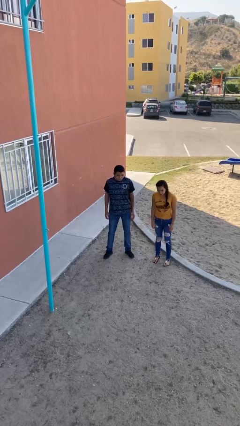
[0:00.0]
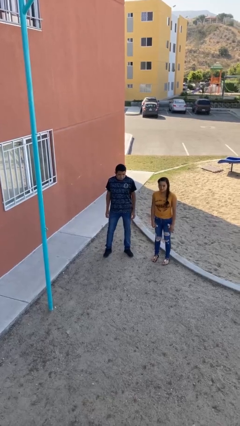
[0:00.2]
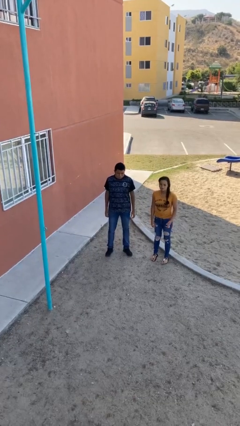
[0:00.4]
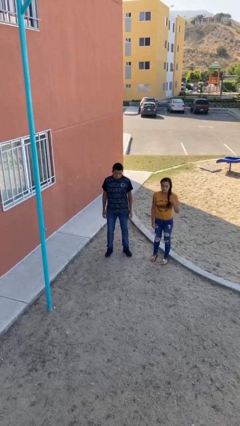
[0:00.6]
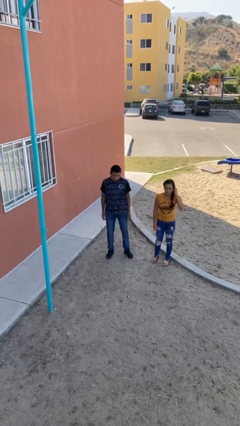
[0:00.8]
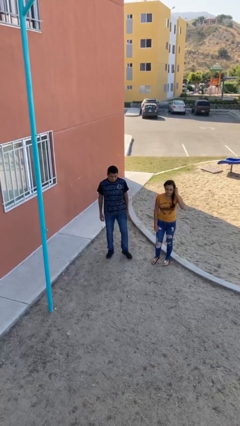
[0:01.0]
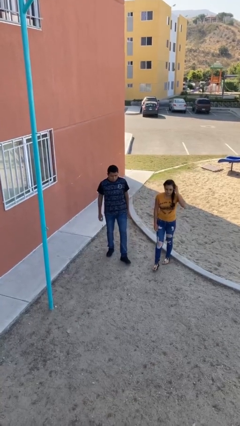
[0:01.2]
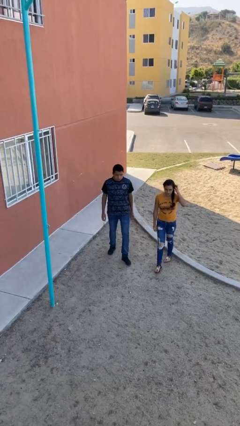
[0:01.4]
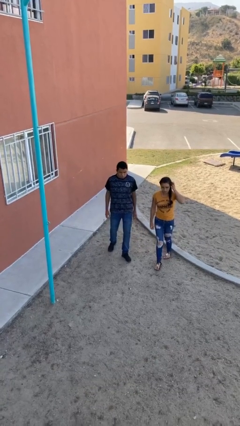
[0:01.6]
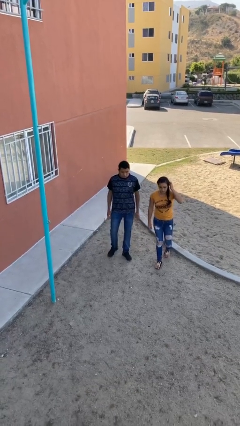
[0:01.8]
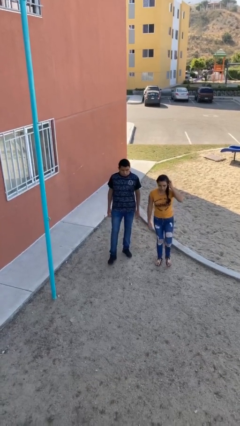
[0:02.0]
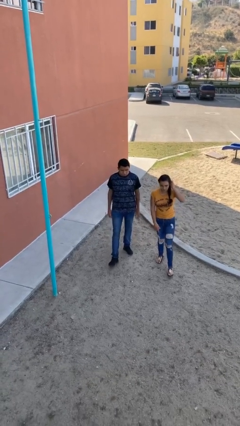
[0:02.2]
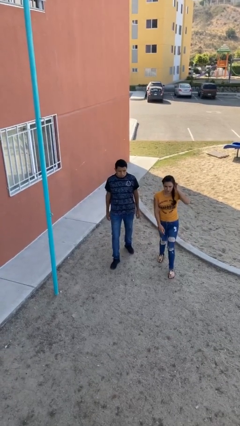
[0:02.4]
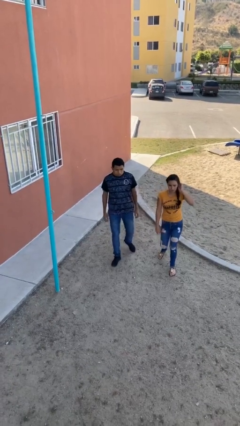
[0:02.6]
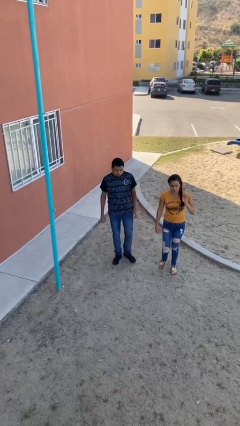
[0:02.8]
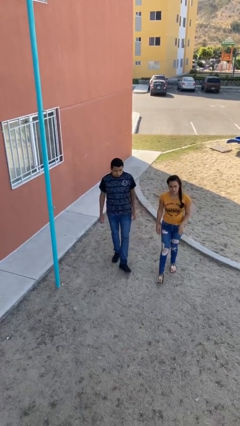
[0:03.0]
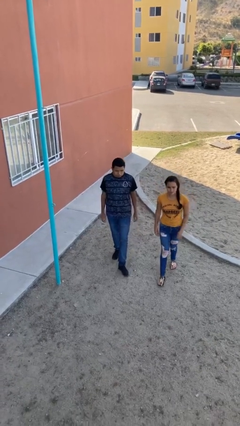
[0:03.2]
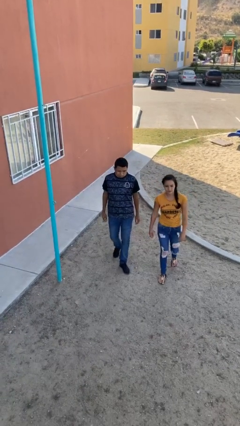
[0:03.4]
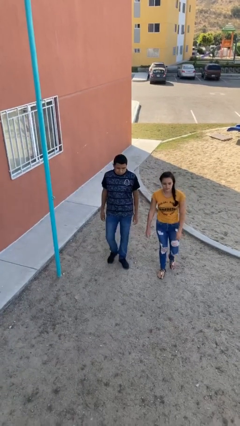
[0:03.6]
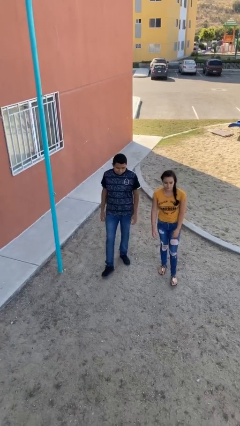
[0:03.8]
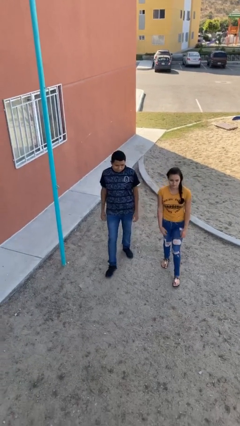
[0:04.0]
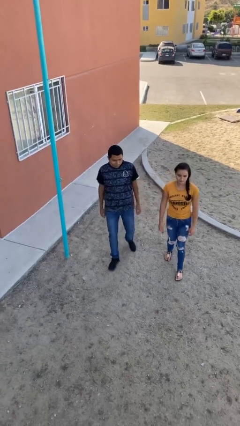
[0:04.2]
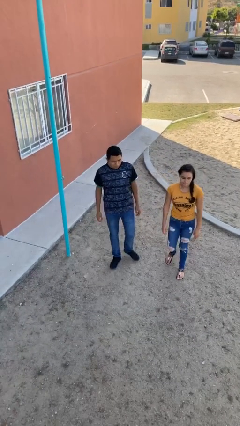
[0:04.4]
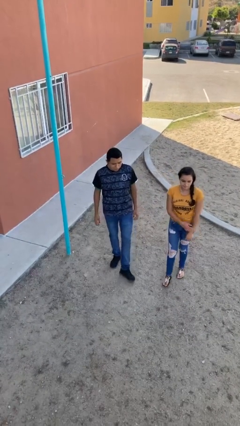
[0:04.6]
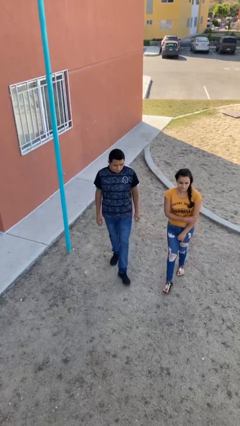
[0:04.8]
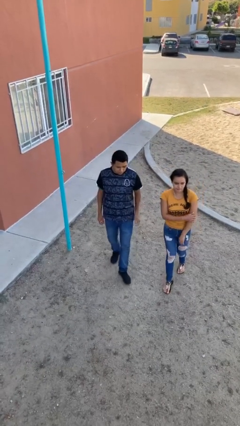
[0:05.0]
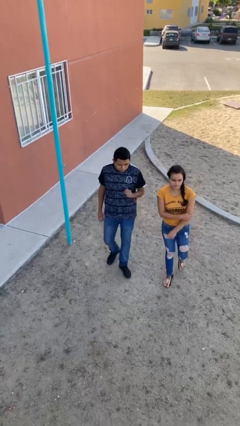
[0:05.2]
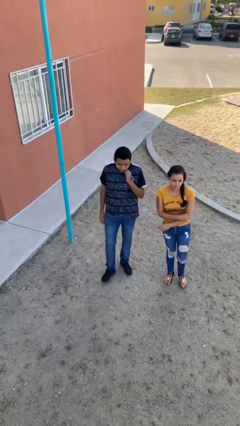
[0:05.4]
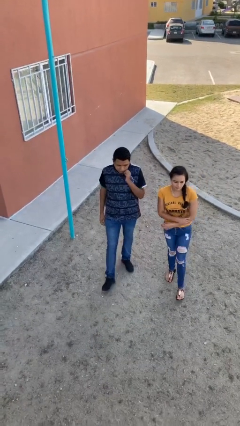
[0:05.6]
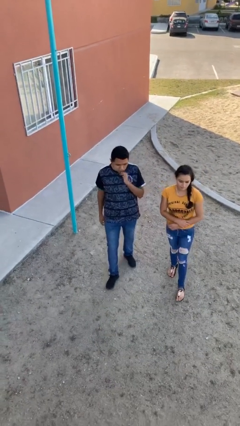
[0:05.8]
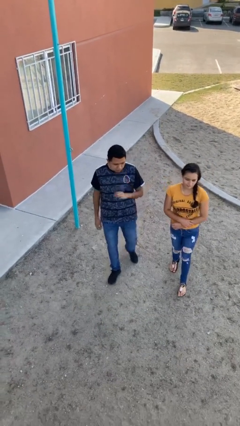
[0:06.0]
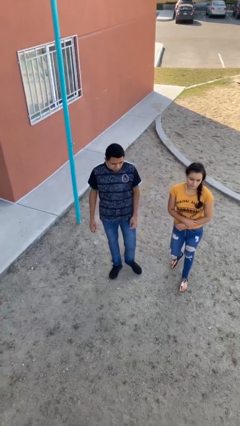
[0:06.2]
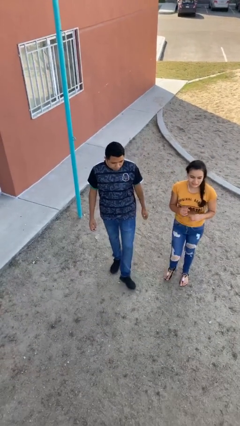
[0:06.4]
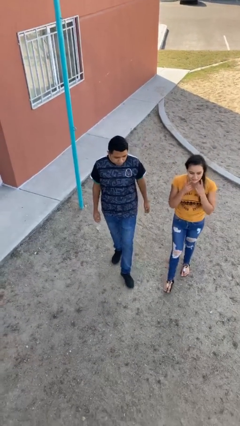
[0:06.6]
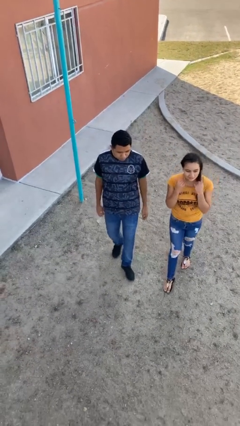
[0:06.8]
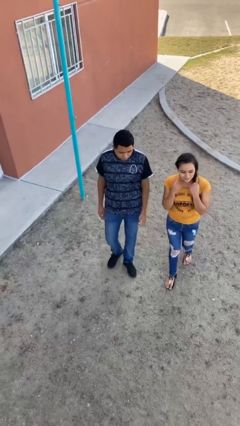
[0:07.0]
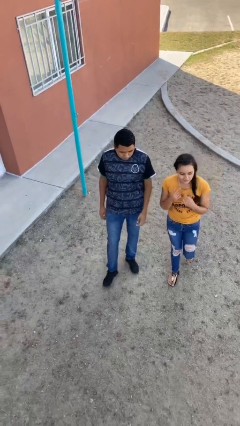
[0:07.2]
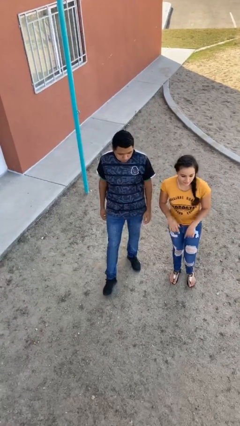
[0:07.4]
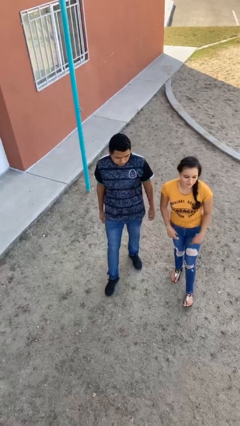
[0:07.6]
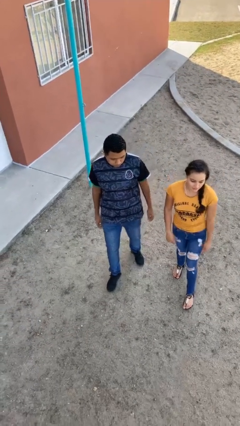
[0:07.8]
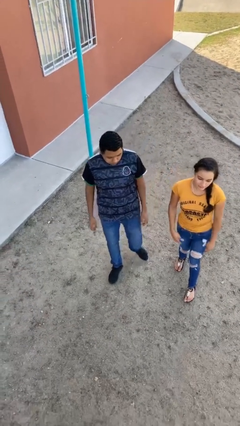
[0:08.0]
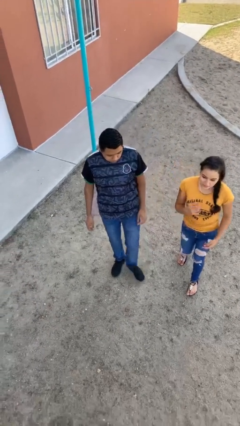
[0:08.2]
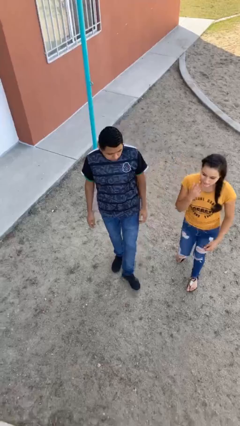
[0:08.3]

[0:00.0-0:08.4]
person talks to person

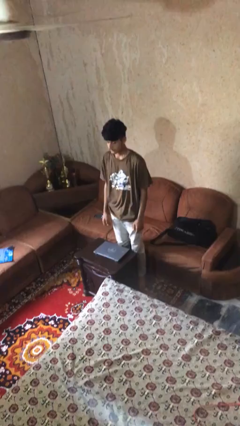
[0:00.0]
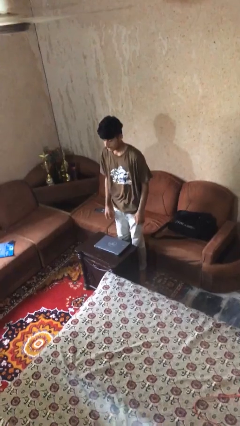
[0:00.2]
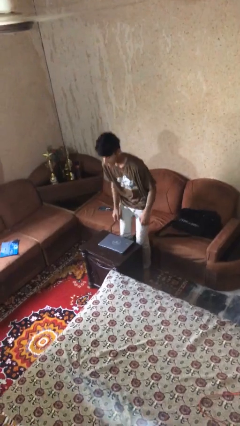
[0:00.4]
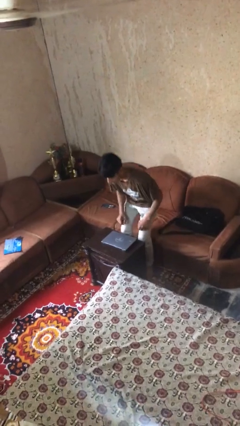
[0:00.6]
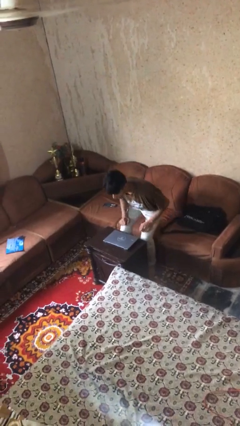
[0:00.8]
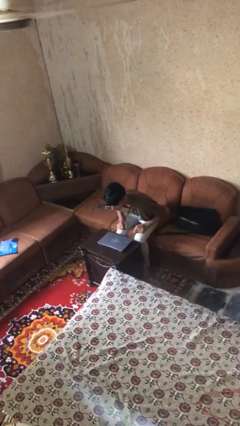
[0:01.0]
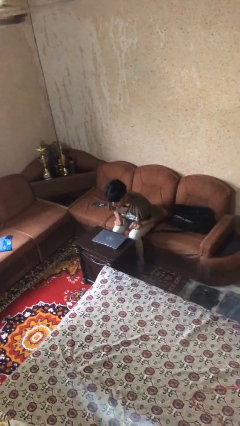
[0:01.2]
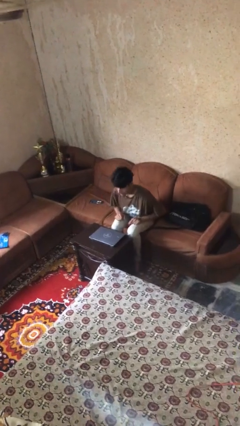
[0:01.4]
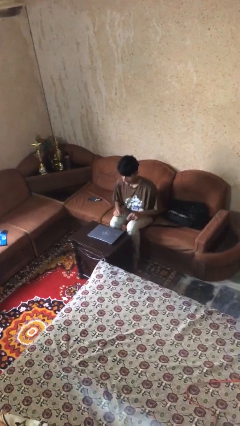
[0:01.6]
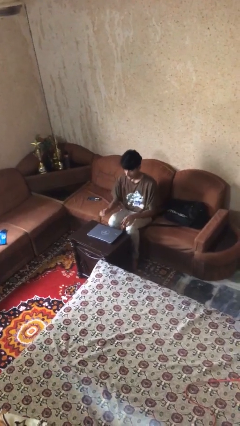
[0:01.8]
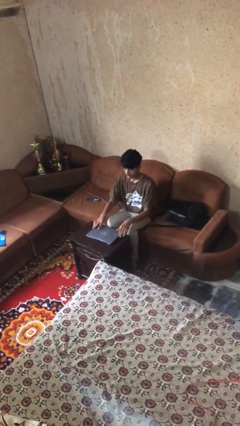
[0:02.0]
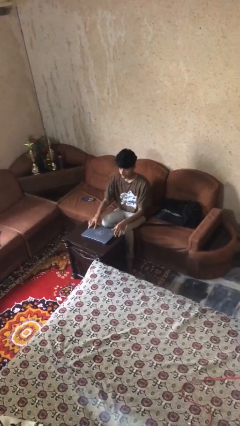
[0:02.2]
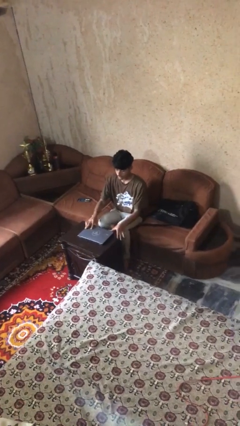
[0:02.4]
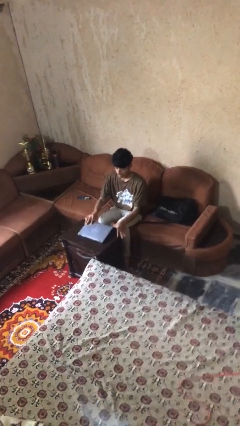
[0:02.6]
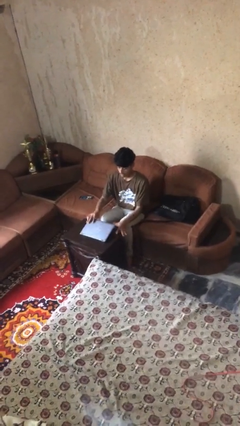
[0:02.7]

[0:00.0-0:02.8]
person sits down

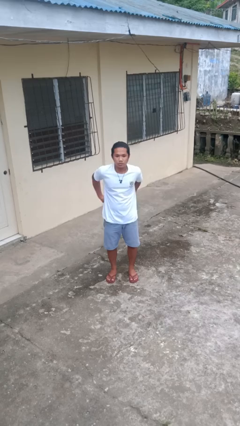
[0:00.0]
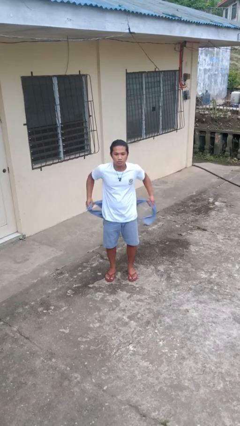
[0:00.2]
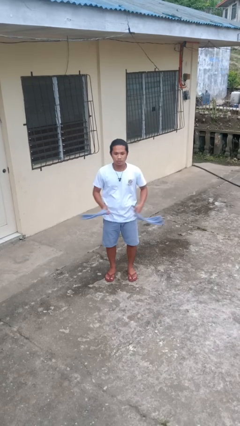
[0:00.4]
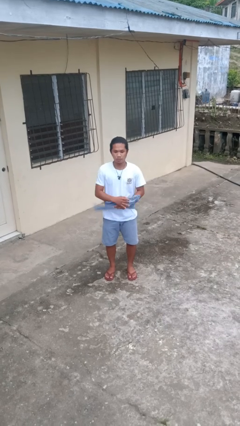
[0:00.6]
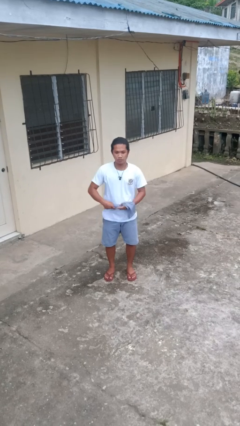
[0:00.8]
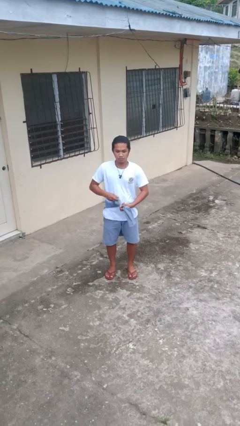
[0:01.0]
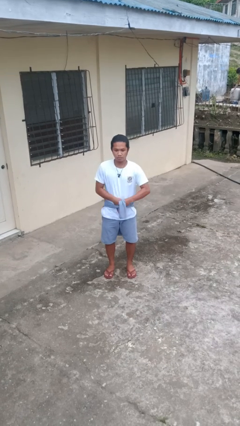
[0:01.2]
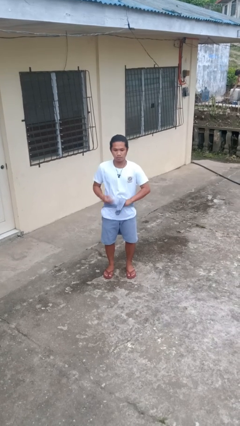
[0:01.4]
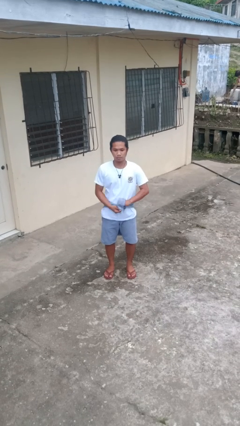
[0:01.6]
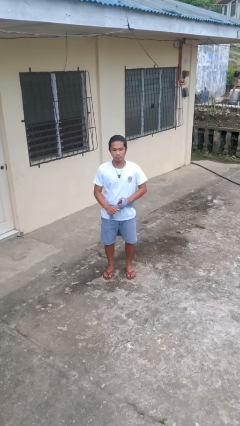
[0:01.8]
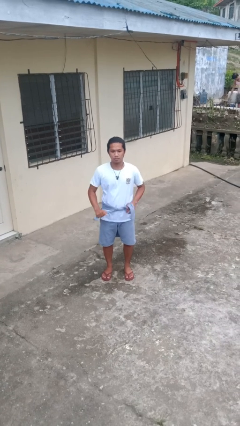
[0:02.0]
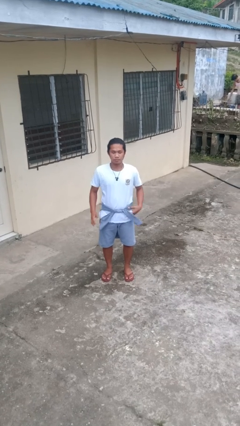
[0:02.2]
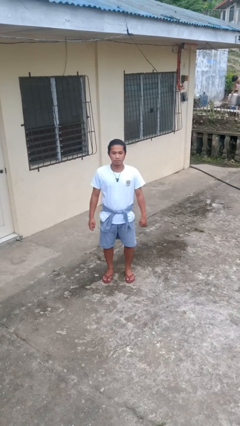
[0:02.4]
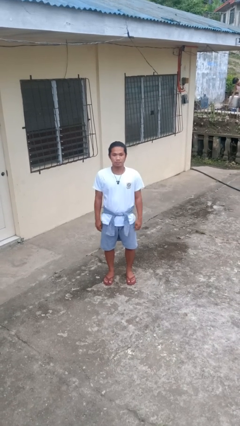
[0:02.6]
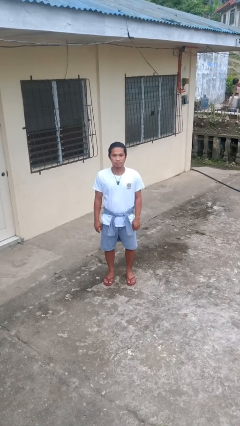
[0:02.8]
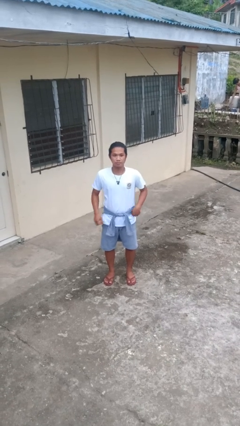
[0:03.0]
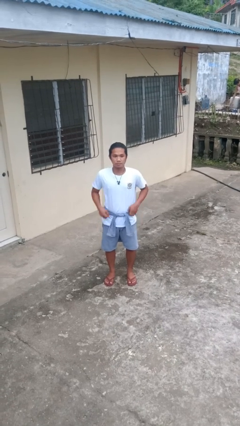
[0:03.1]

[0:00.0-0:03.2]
person ties jacket around waist

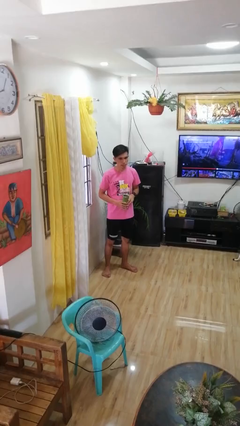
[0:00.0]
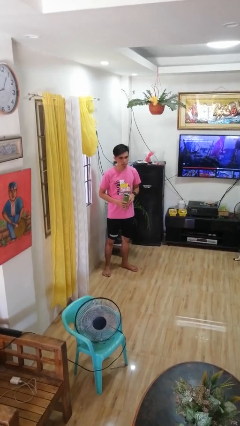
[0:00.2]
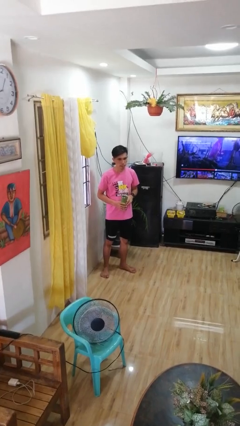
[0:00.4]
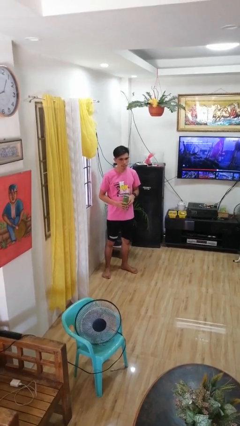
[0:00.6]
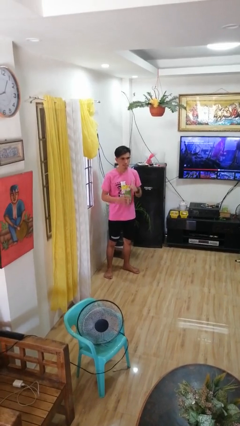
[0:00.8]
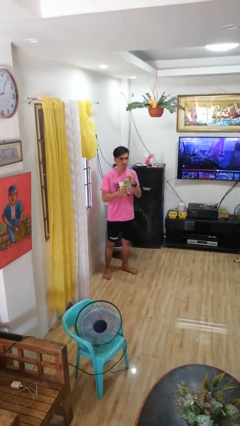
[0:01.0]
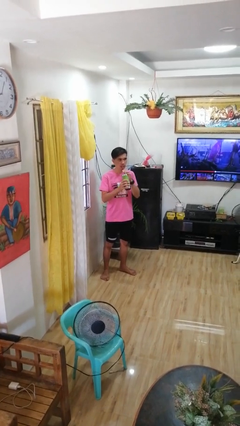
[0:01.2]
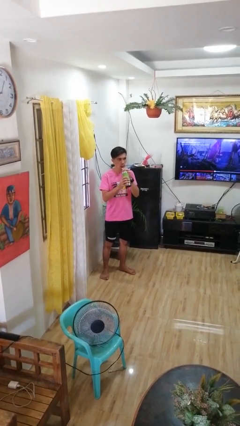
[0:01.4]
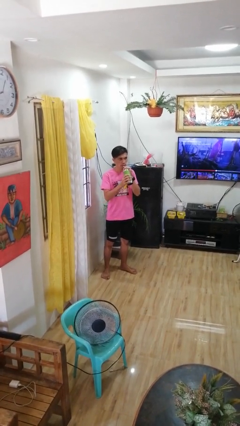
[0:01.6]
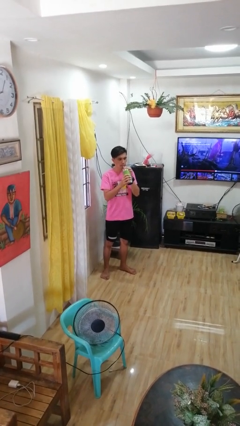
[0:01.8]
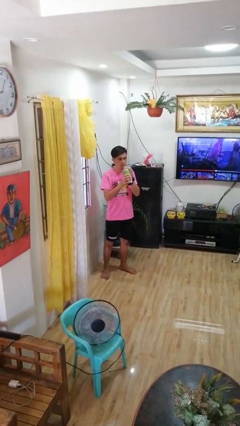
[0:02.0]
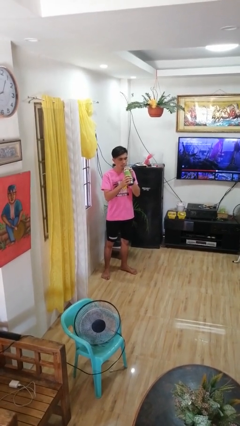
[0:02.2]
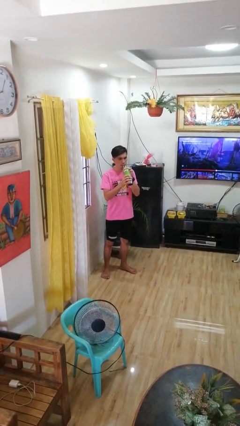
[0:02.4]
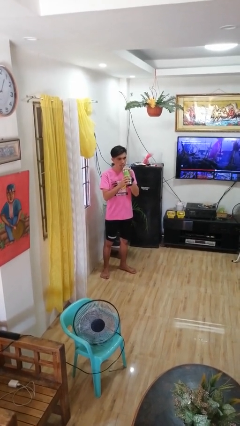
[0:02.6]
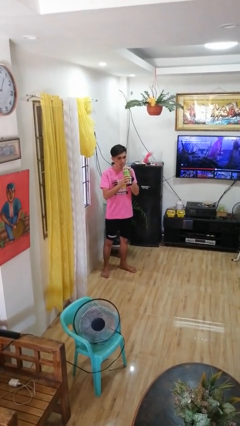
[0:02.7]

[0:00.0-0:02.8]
person drinks from straw

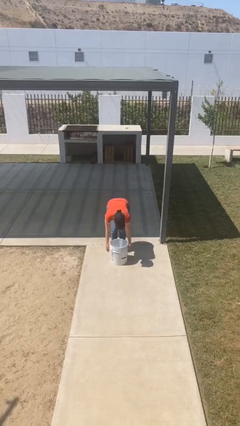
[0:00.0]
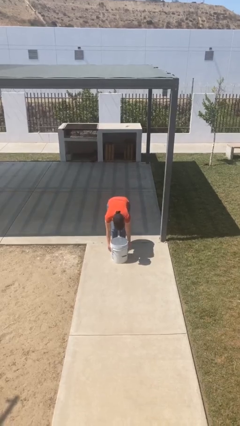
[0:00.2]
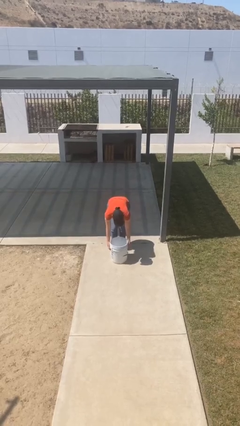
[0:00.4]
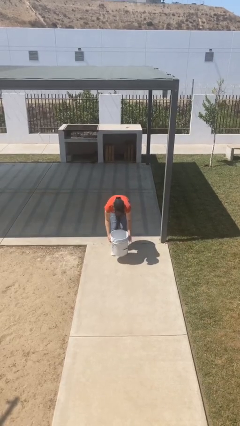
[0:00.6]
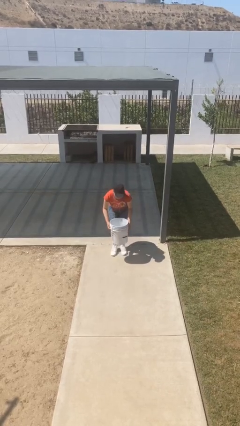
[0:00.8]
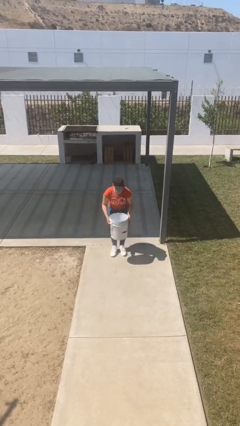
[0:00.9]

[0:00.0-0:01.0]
person picks up object from floor
